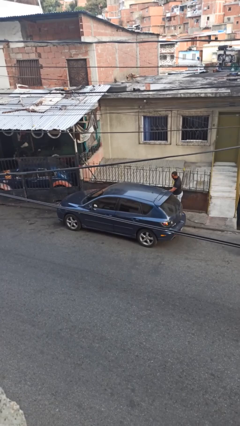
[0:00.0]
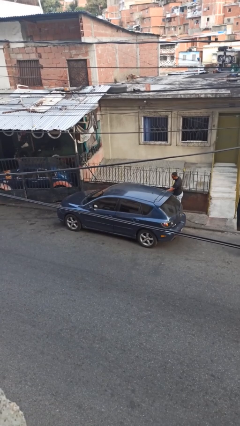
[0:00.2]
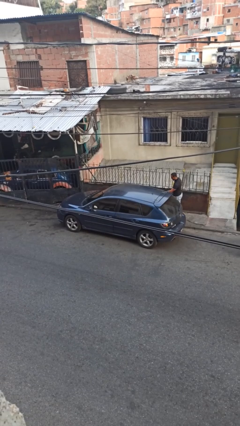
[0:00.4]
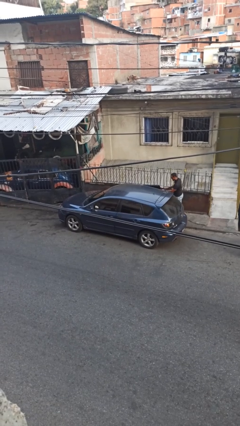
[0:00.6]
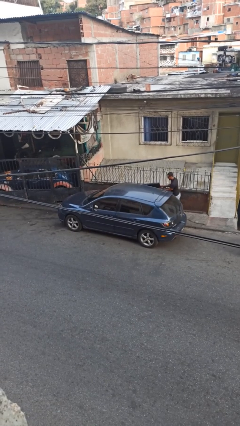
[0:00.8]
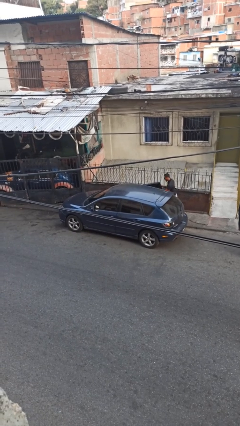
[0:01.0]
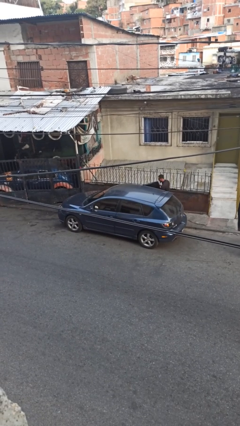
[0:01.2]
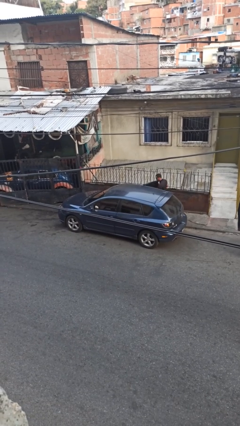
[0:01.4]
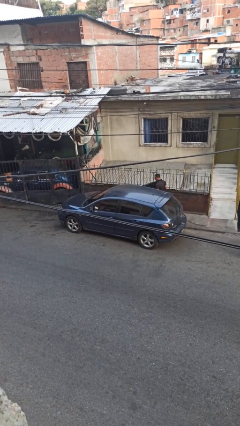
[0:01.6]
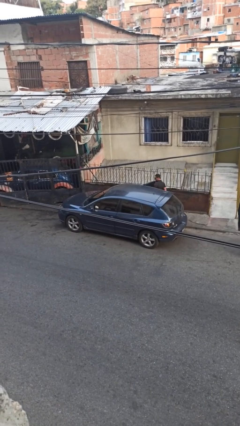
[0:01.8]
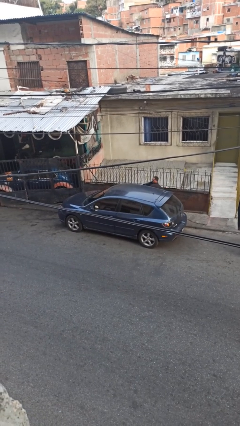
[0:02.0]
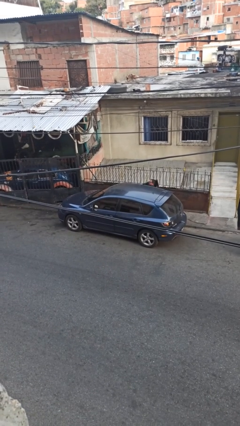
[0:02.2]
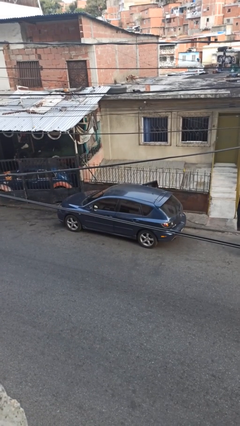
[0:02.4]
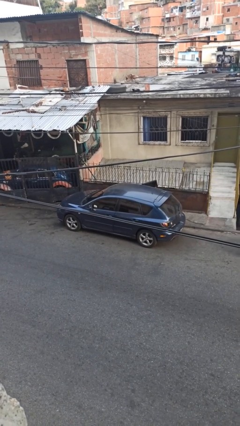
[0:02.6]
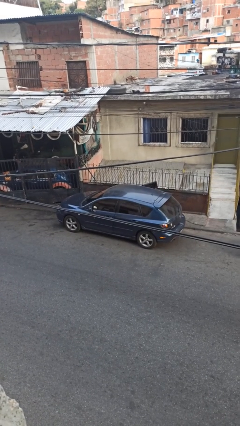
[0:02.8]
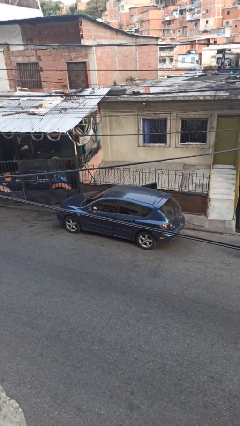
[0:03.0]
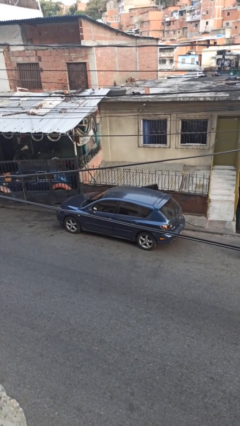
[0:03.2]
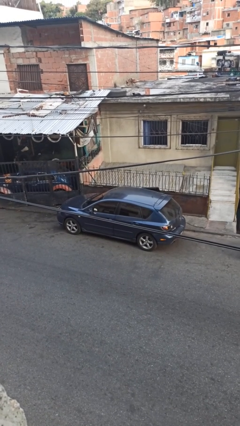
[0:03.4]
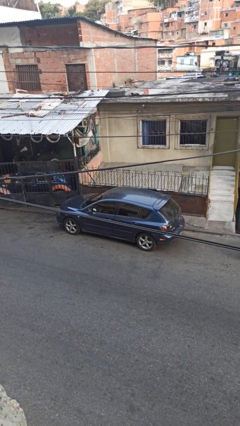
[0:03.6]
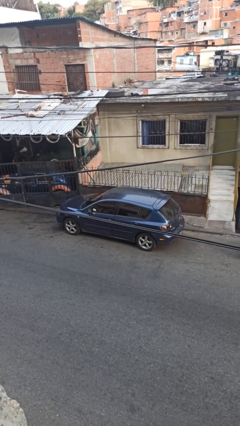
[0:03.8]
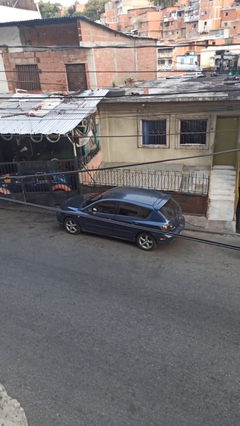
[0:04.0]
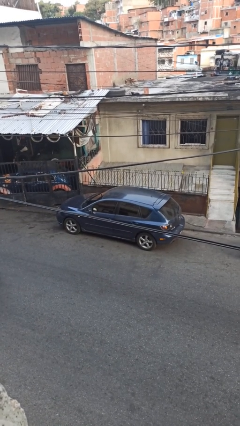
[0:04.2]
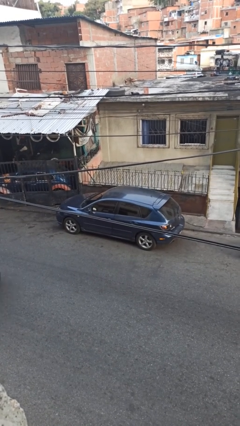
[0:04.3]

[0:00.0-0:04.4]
car picks up person

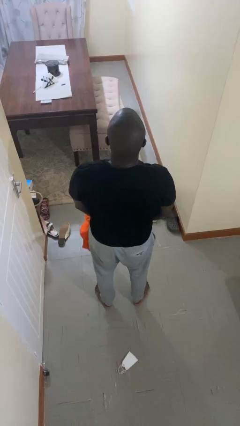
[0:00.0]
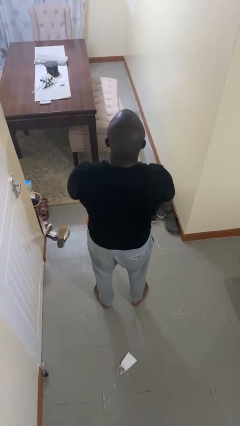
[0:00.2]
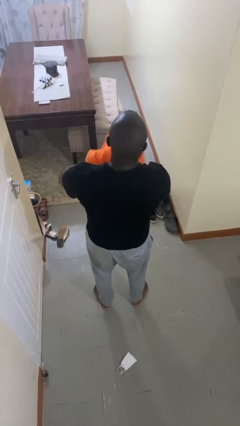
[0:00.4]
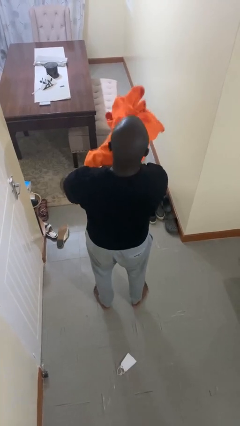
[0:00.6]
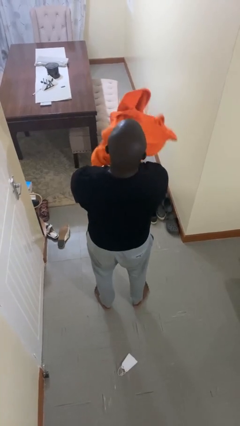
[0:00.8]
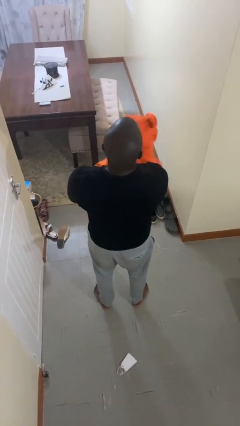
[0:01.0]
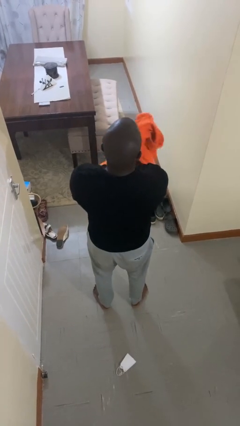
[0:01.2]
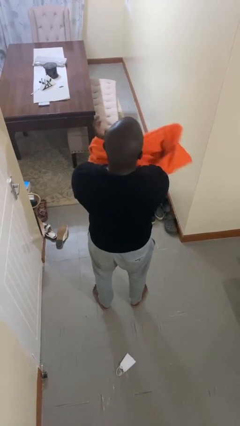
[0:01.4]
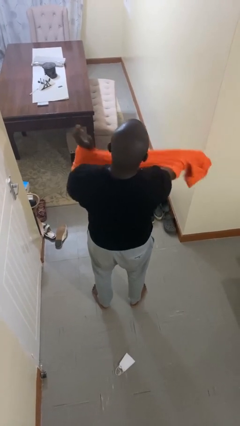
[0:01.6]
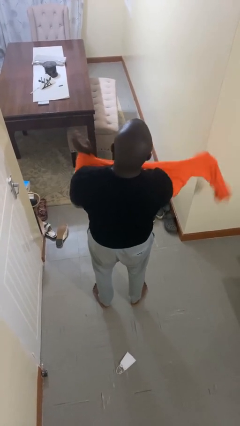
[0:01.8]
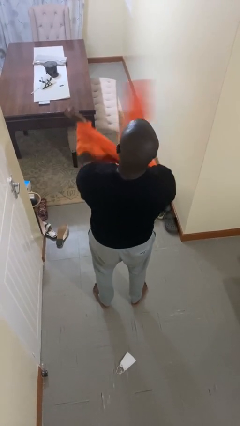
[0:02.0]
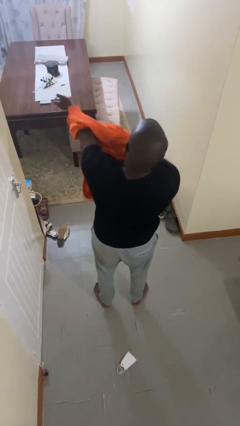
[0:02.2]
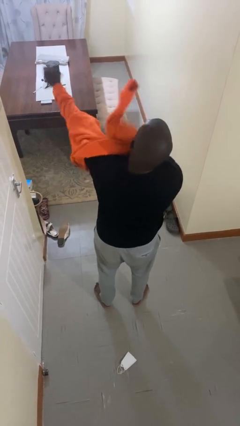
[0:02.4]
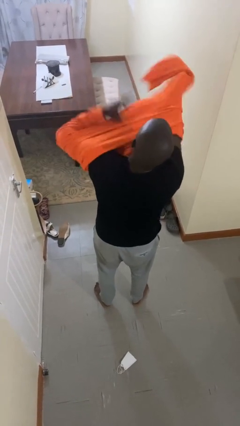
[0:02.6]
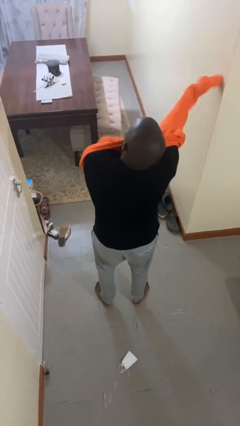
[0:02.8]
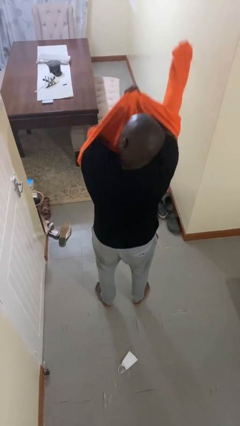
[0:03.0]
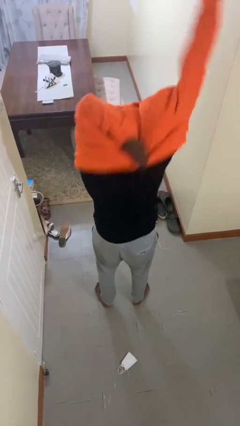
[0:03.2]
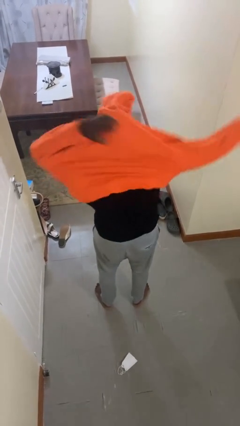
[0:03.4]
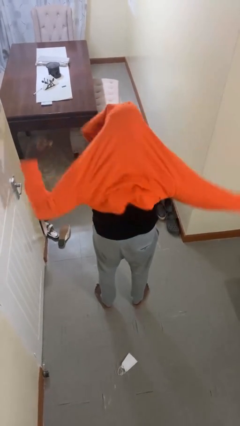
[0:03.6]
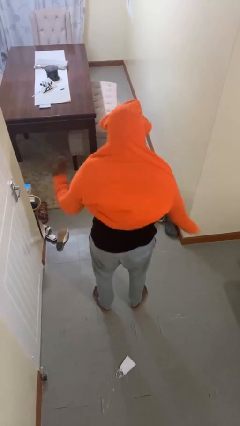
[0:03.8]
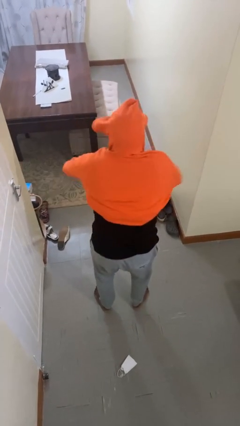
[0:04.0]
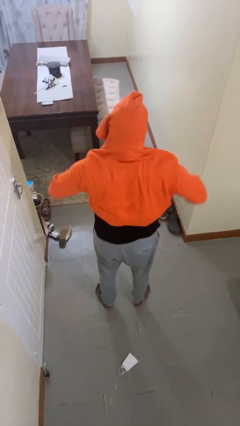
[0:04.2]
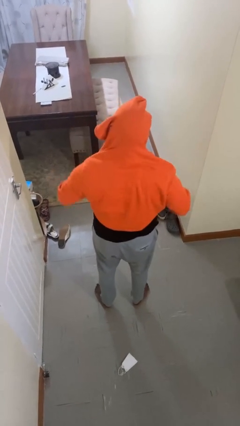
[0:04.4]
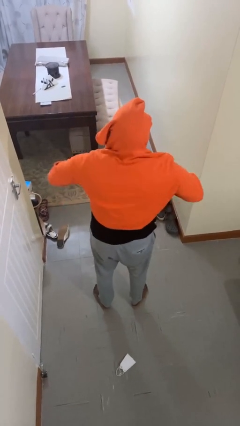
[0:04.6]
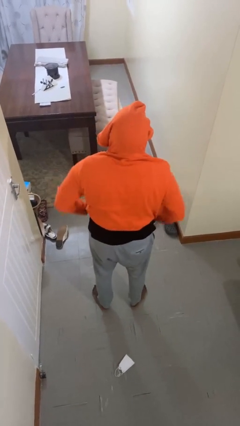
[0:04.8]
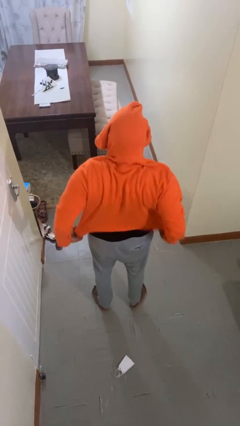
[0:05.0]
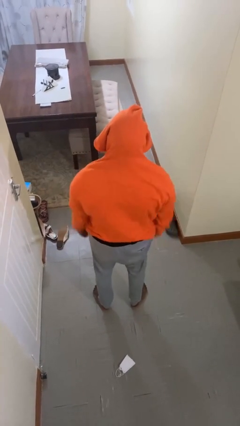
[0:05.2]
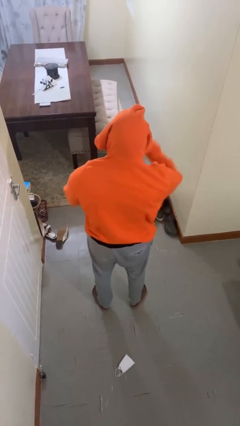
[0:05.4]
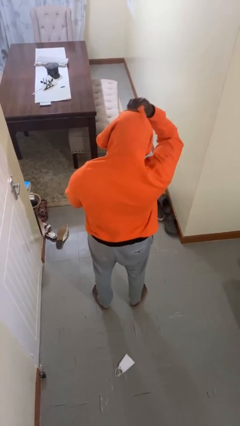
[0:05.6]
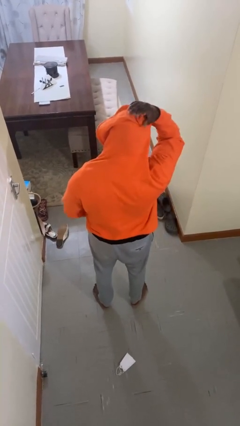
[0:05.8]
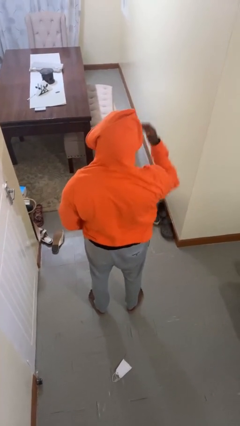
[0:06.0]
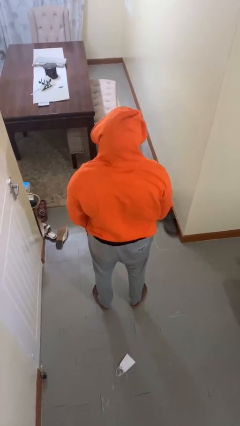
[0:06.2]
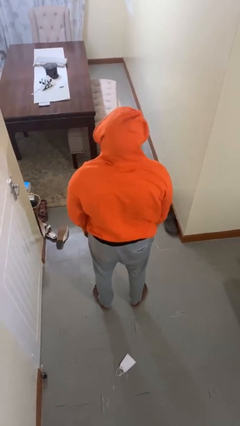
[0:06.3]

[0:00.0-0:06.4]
person puts on hoodie

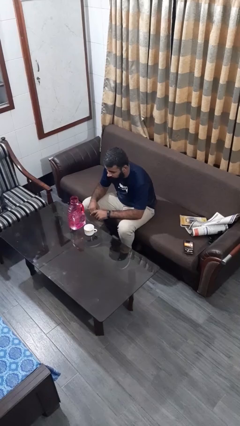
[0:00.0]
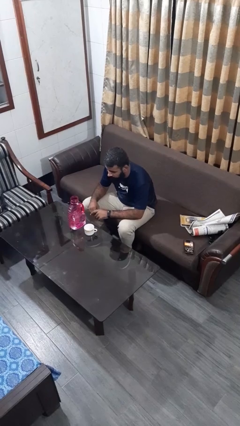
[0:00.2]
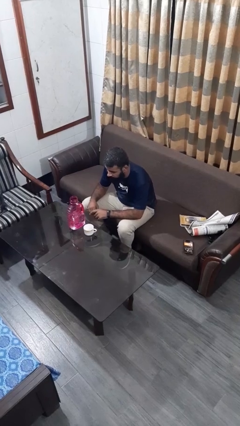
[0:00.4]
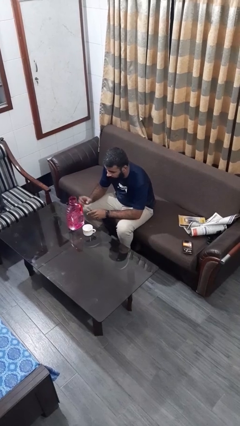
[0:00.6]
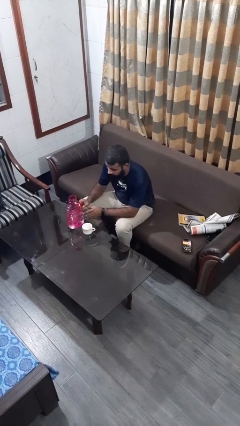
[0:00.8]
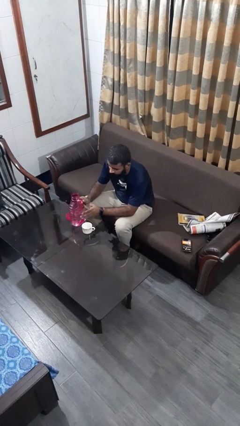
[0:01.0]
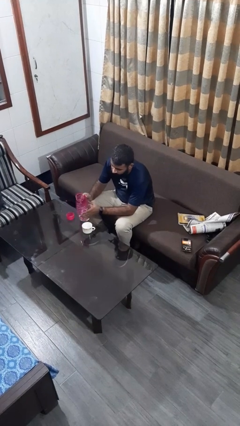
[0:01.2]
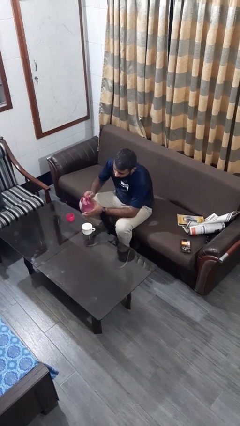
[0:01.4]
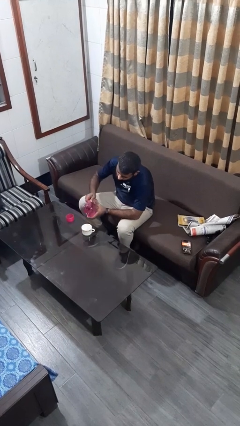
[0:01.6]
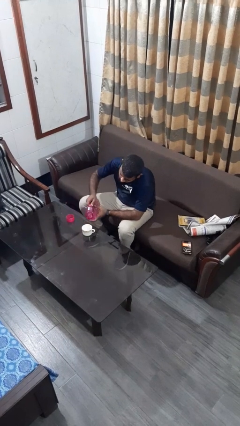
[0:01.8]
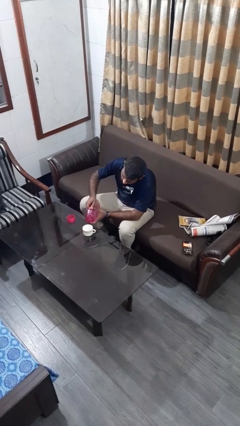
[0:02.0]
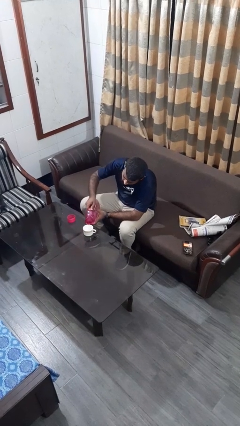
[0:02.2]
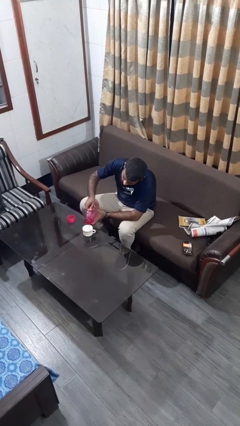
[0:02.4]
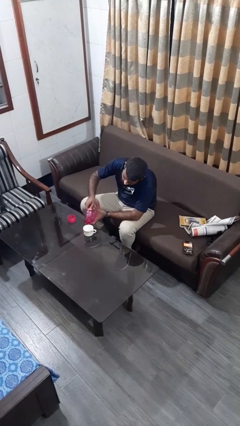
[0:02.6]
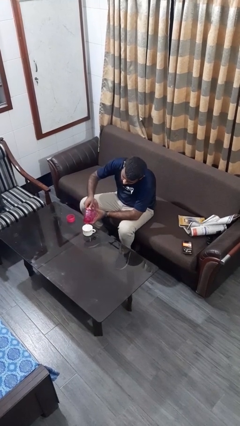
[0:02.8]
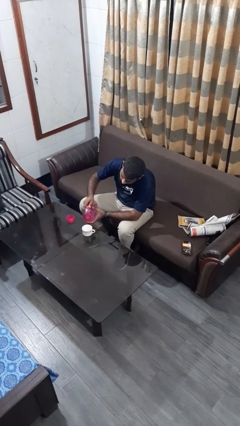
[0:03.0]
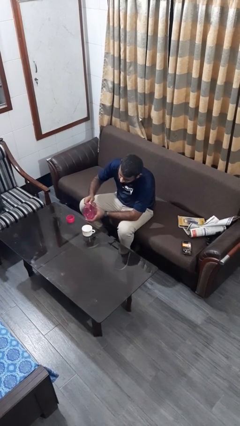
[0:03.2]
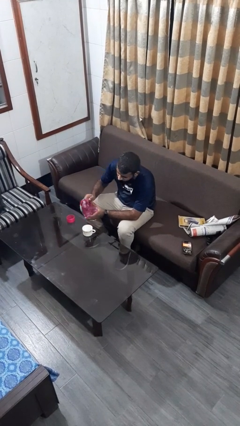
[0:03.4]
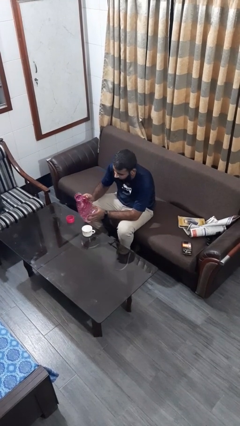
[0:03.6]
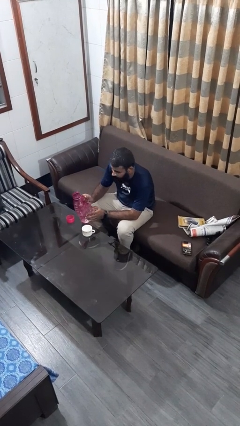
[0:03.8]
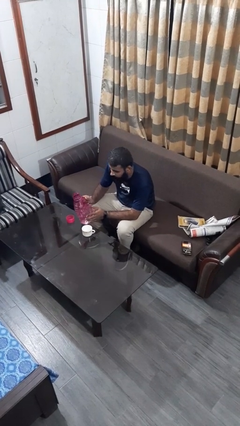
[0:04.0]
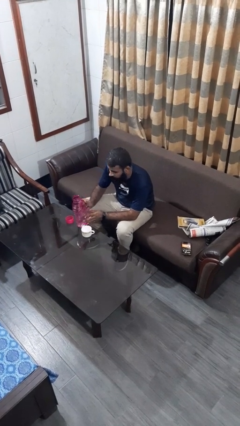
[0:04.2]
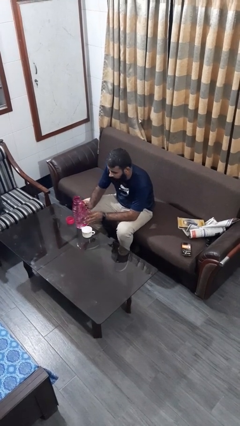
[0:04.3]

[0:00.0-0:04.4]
person pours liquid into cup

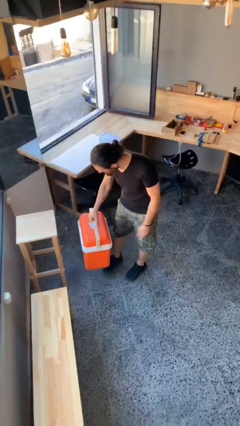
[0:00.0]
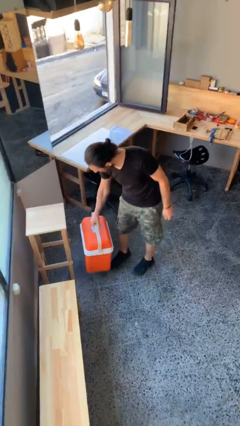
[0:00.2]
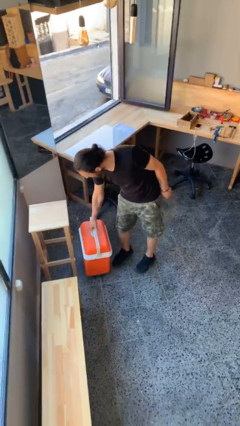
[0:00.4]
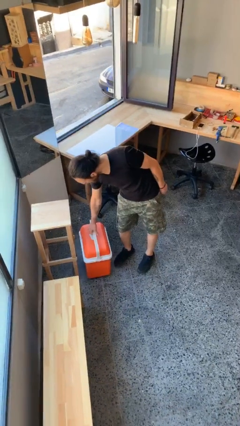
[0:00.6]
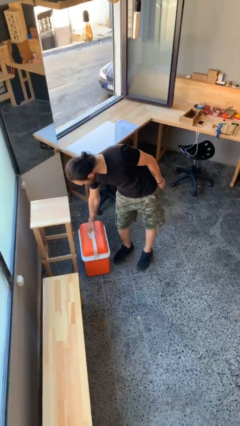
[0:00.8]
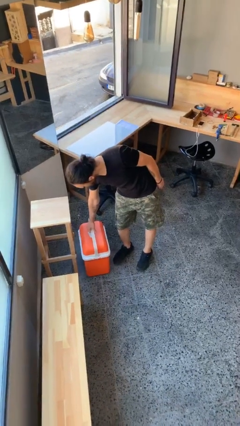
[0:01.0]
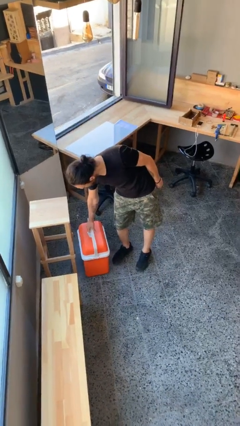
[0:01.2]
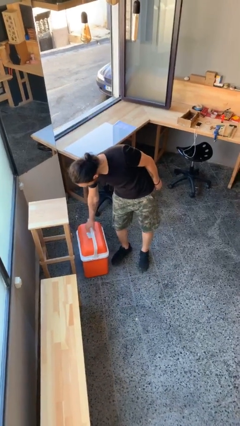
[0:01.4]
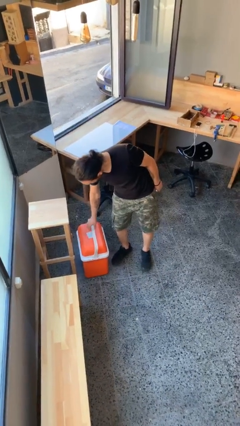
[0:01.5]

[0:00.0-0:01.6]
person puts down object on floor

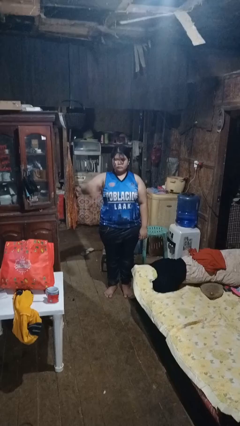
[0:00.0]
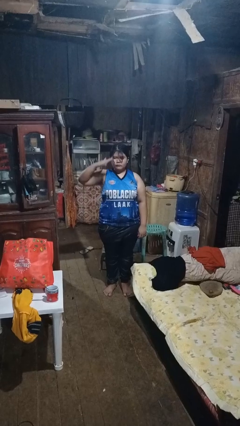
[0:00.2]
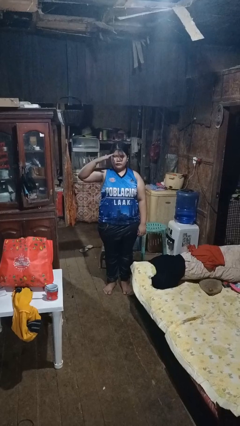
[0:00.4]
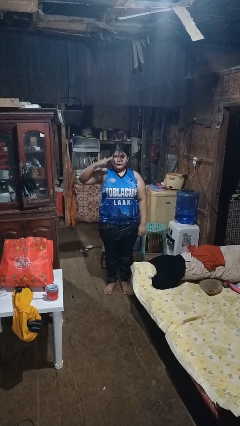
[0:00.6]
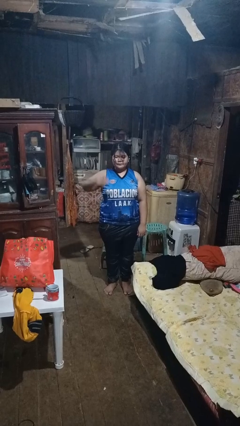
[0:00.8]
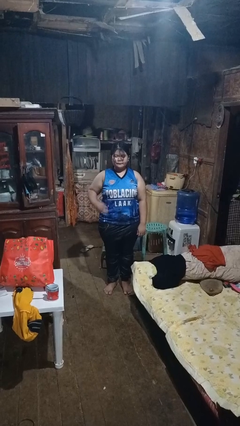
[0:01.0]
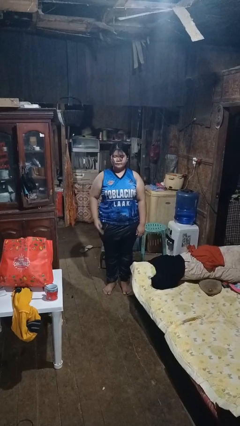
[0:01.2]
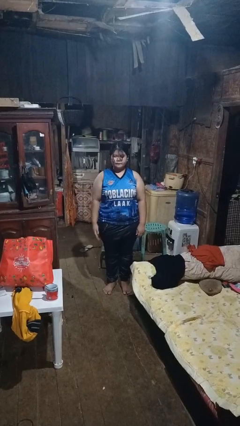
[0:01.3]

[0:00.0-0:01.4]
person salutes
